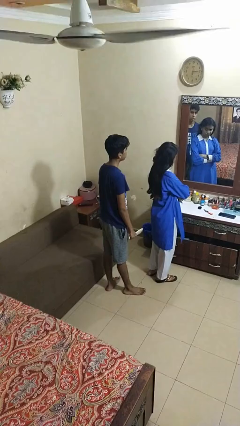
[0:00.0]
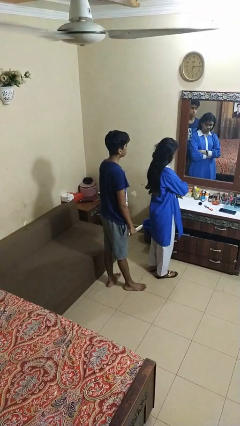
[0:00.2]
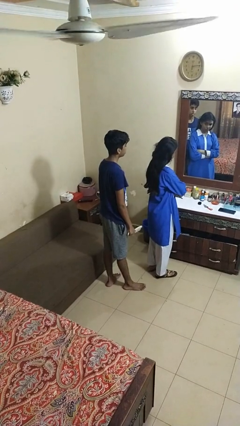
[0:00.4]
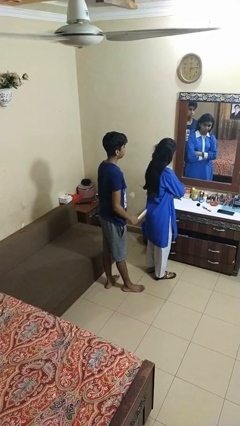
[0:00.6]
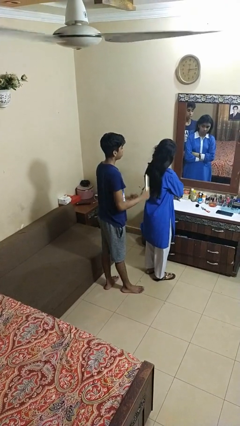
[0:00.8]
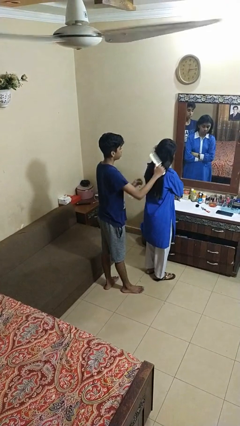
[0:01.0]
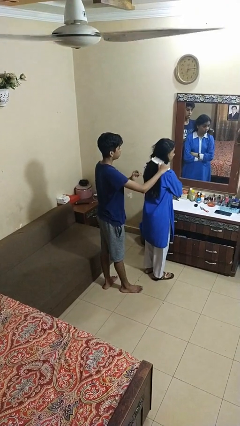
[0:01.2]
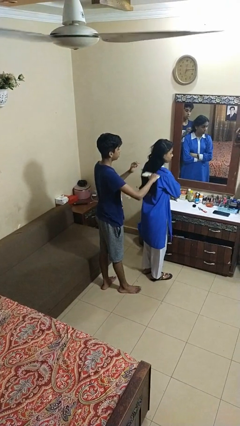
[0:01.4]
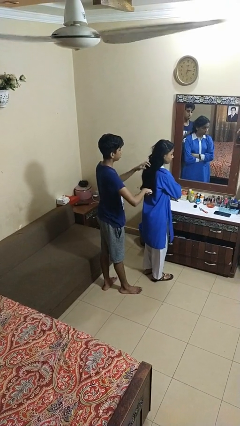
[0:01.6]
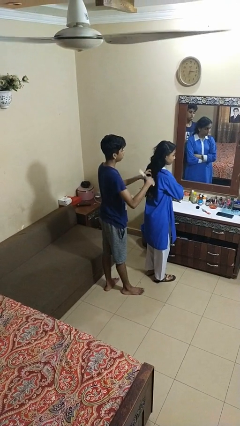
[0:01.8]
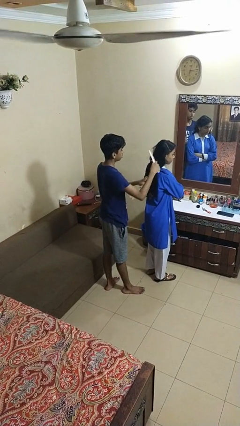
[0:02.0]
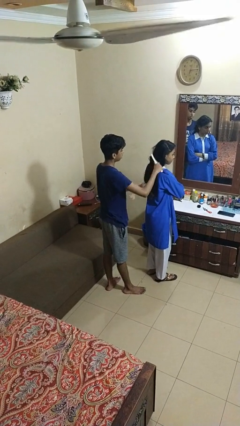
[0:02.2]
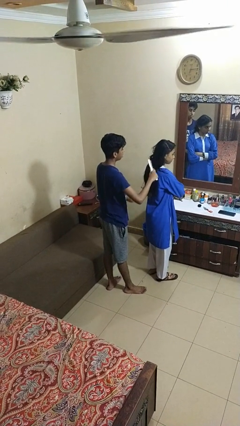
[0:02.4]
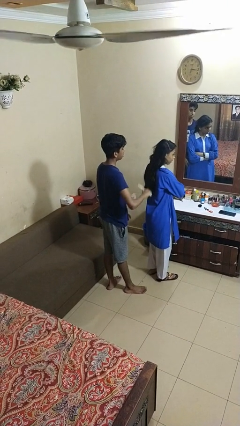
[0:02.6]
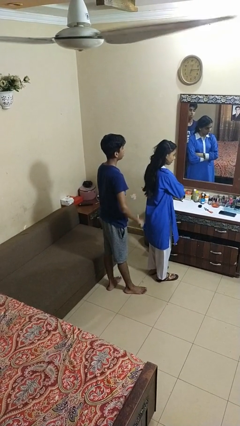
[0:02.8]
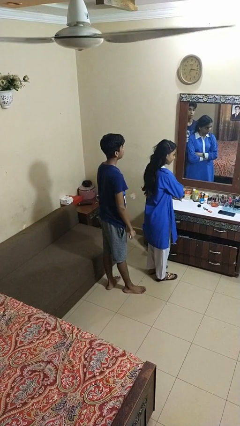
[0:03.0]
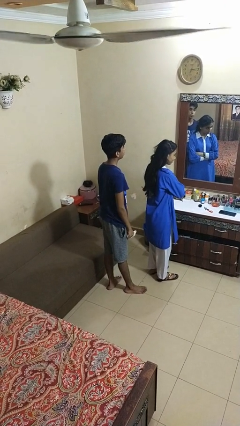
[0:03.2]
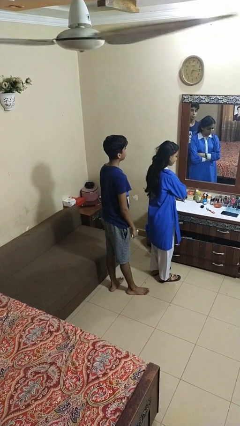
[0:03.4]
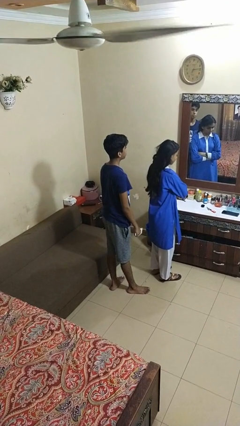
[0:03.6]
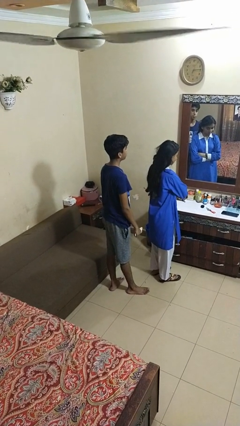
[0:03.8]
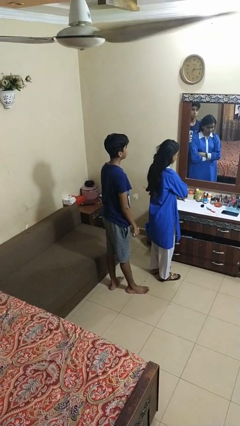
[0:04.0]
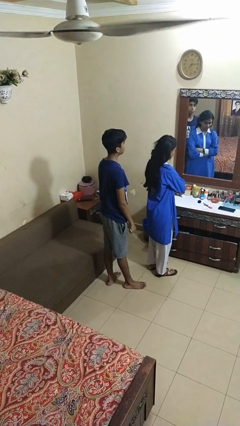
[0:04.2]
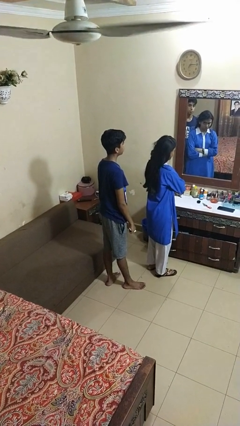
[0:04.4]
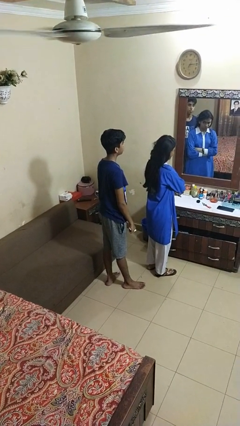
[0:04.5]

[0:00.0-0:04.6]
person brushes hair of person

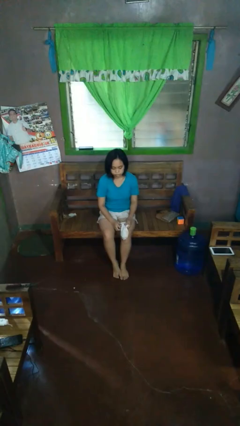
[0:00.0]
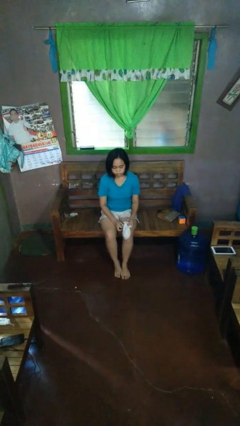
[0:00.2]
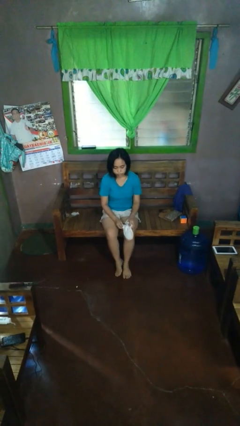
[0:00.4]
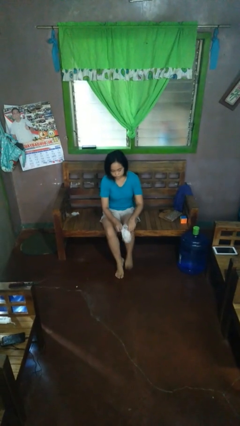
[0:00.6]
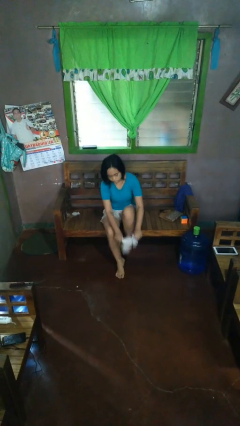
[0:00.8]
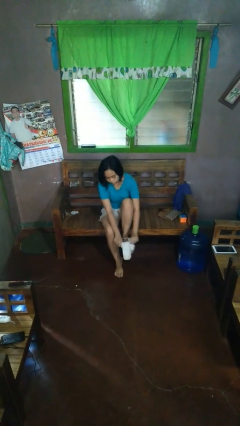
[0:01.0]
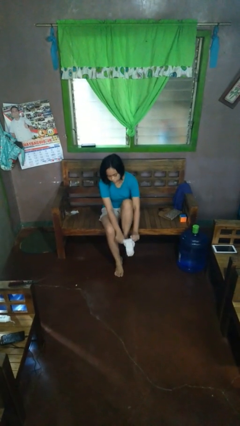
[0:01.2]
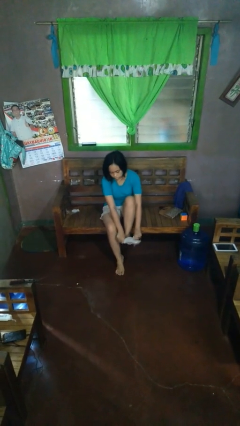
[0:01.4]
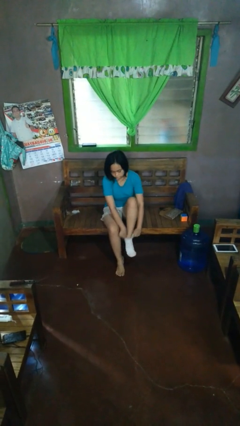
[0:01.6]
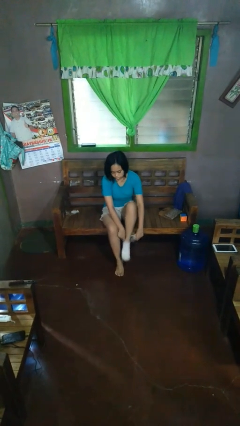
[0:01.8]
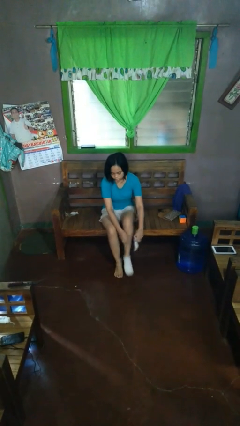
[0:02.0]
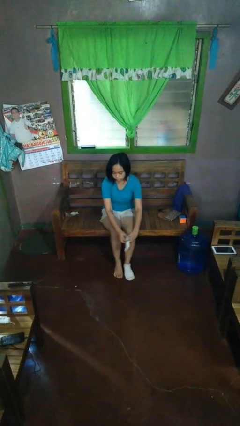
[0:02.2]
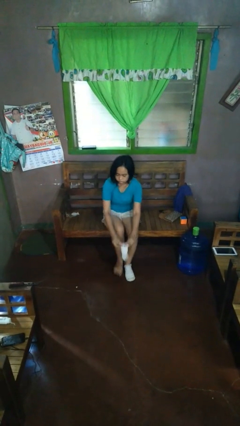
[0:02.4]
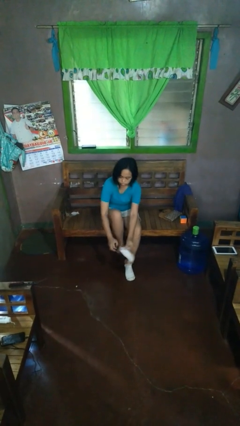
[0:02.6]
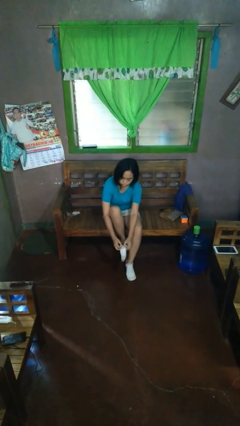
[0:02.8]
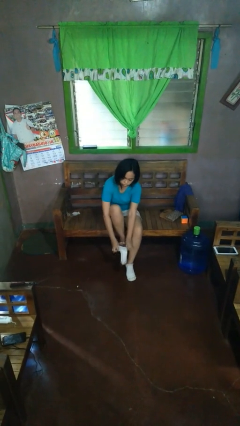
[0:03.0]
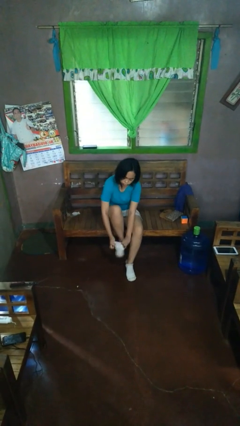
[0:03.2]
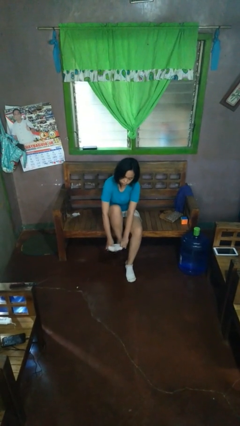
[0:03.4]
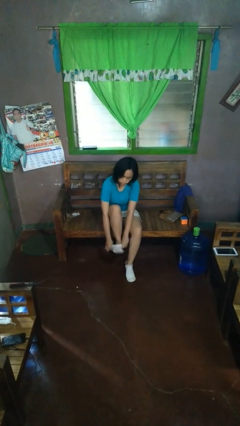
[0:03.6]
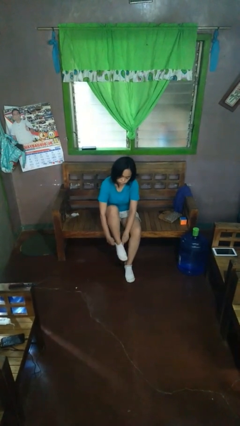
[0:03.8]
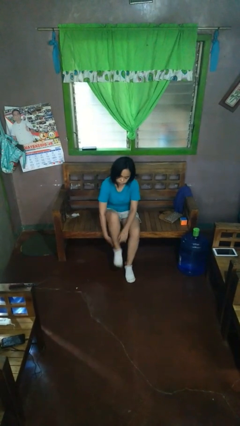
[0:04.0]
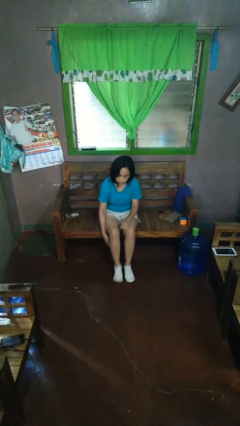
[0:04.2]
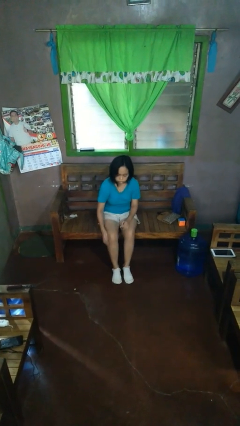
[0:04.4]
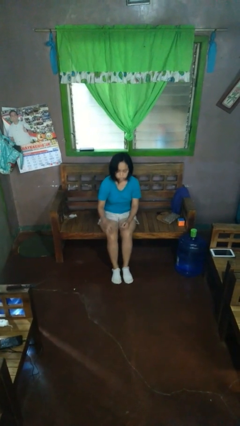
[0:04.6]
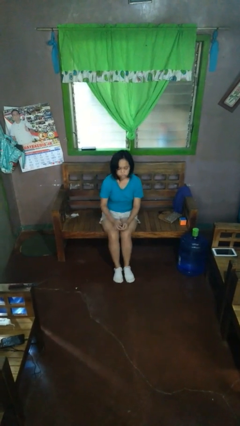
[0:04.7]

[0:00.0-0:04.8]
person puts on socks

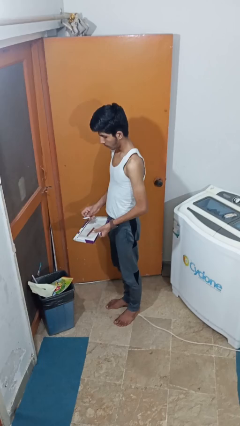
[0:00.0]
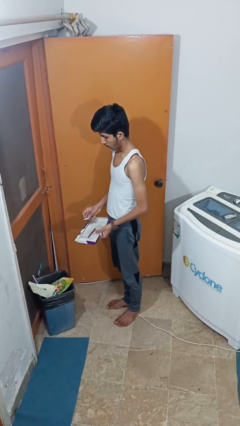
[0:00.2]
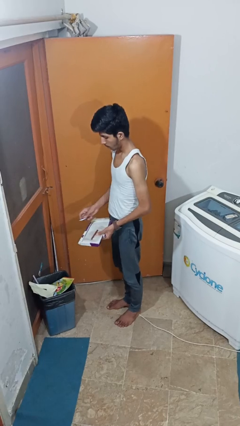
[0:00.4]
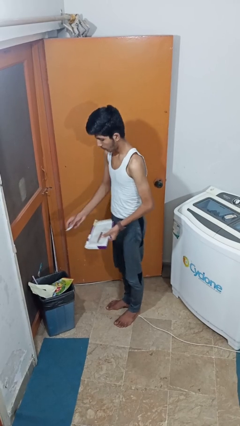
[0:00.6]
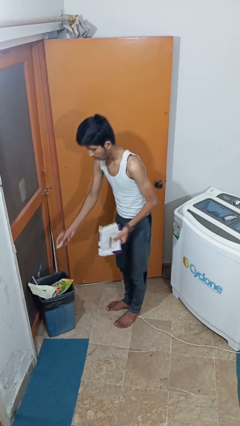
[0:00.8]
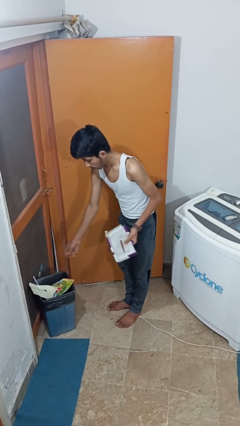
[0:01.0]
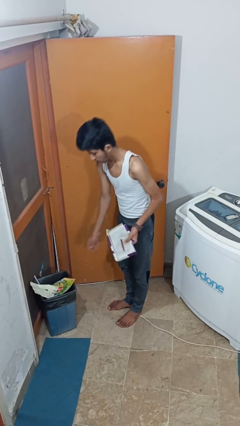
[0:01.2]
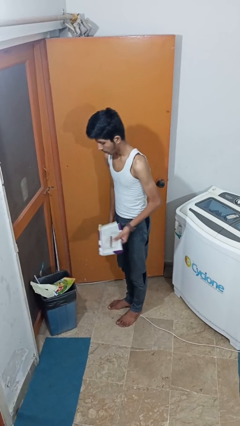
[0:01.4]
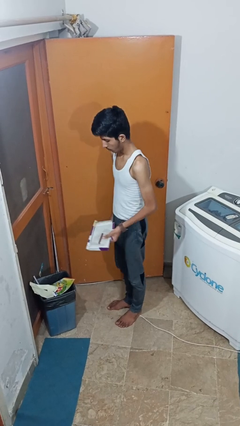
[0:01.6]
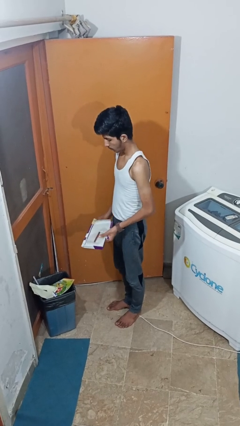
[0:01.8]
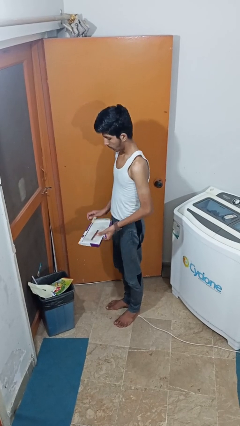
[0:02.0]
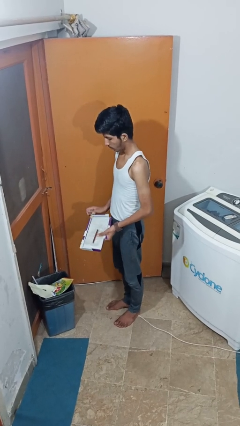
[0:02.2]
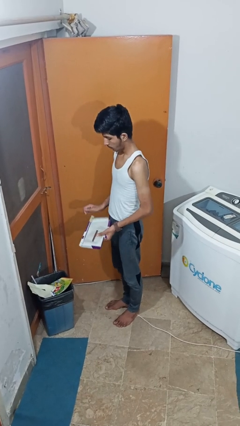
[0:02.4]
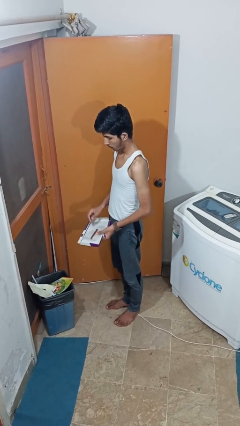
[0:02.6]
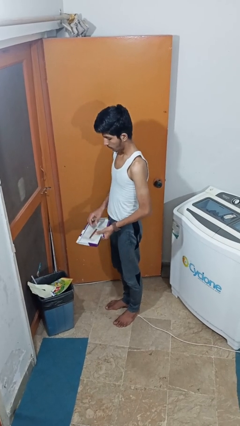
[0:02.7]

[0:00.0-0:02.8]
person discards trash

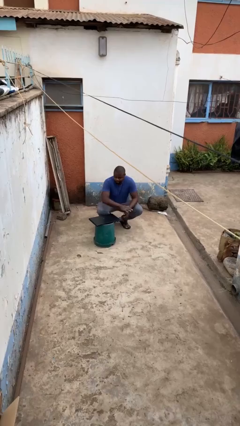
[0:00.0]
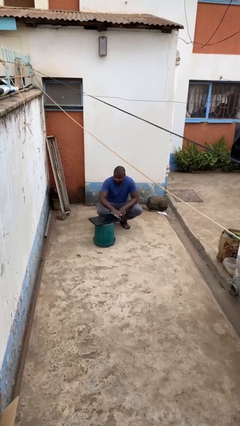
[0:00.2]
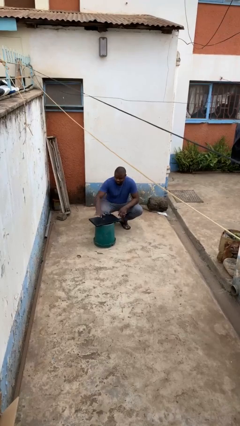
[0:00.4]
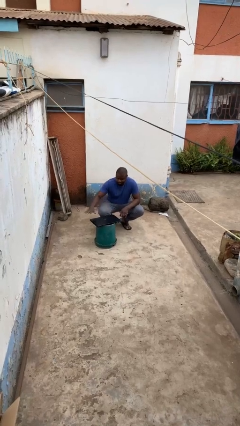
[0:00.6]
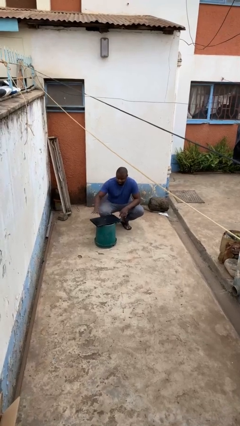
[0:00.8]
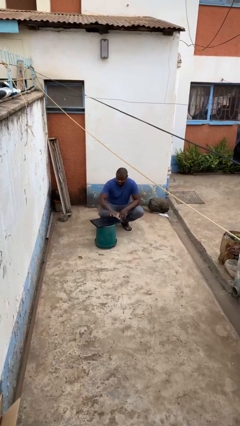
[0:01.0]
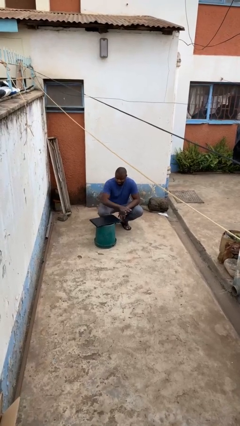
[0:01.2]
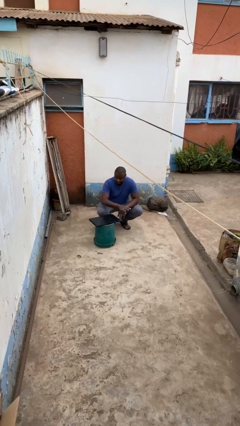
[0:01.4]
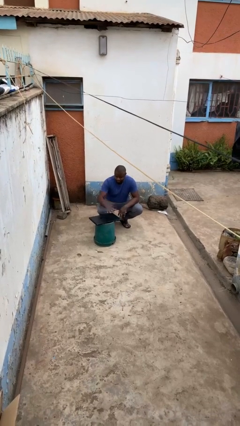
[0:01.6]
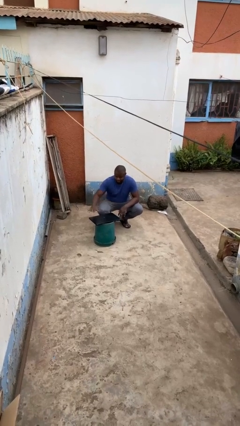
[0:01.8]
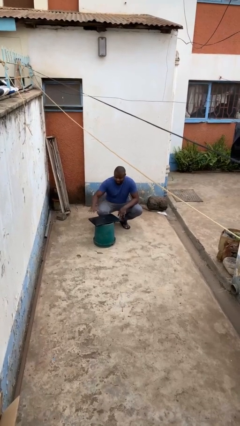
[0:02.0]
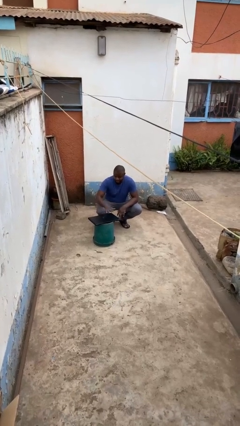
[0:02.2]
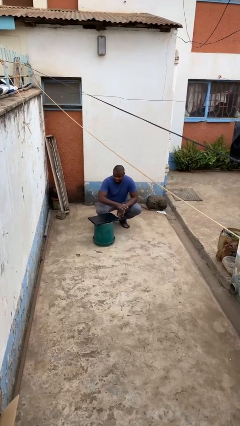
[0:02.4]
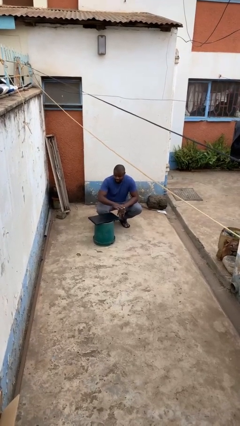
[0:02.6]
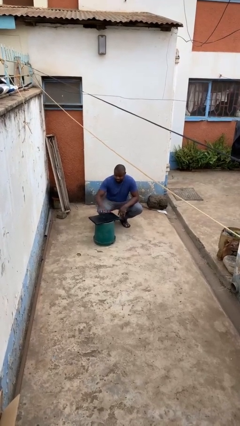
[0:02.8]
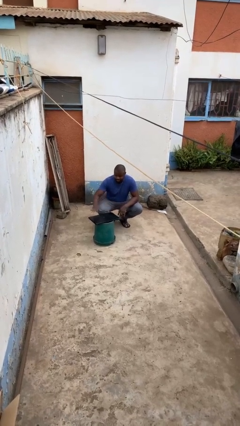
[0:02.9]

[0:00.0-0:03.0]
person waves hand over object

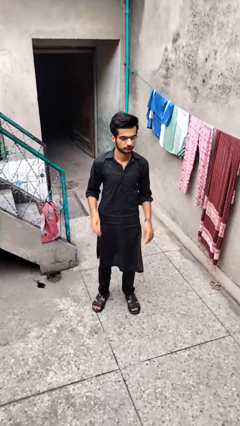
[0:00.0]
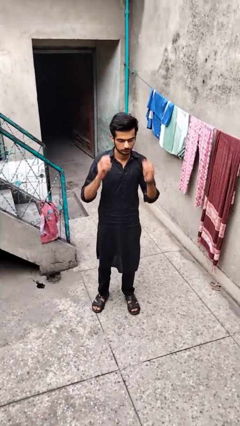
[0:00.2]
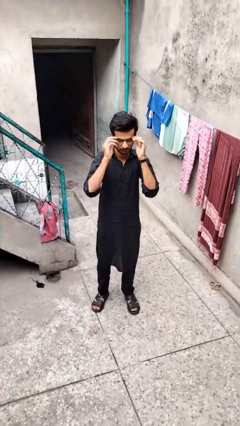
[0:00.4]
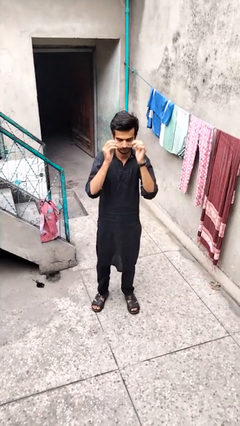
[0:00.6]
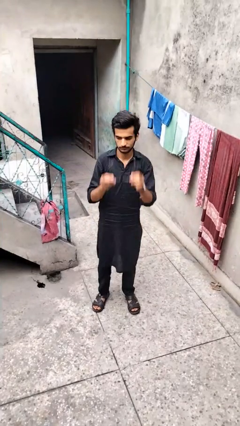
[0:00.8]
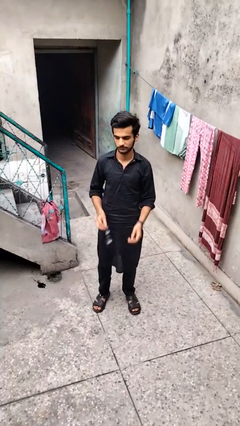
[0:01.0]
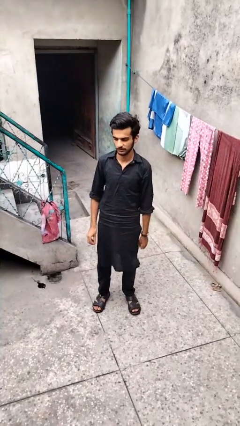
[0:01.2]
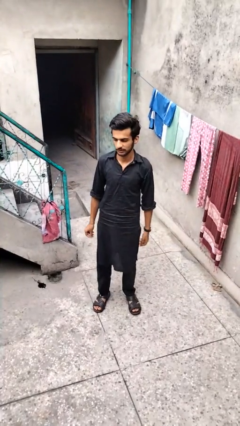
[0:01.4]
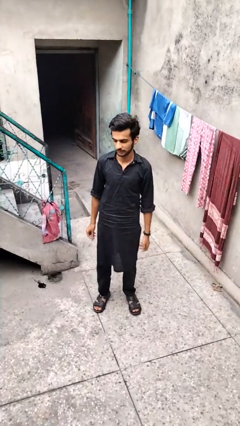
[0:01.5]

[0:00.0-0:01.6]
person takes off glasses

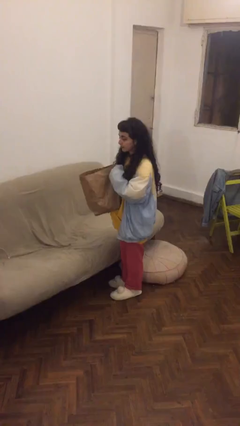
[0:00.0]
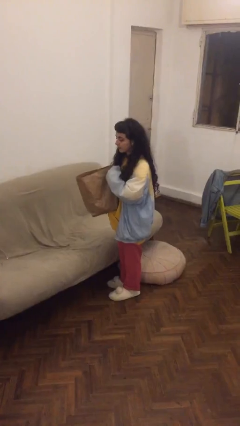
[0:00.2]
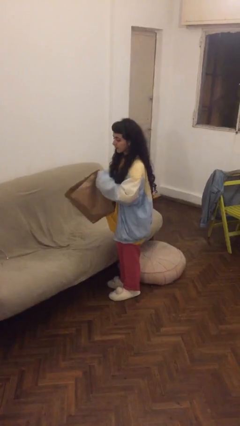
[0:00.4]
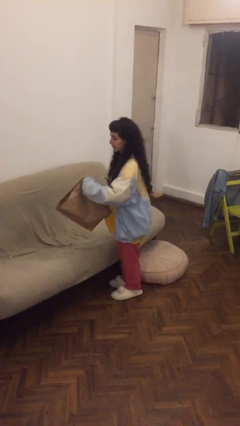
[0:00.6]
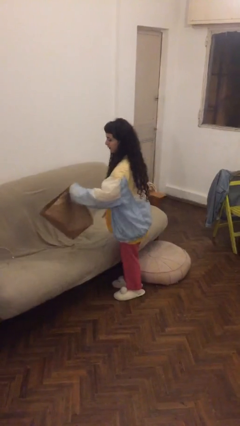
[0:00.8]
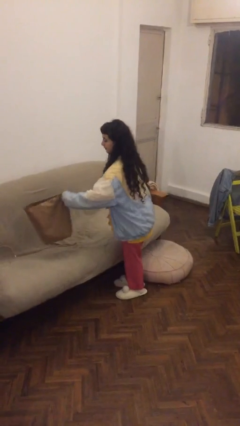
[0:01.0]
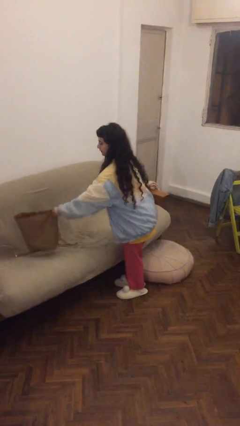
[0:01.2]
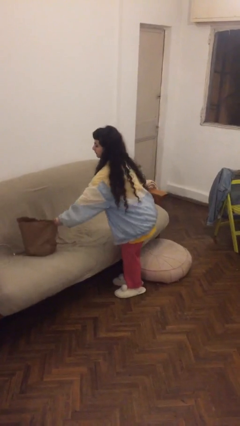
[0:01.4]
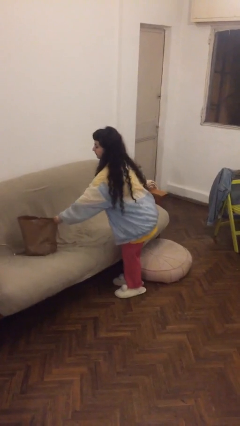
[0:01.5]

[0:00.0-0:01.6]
person puts down object on couch
